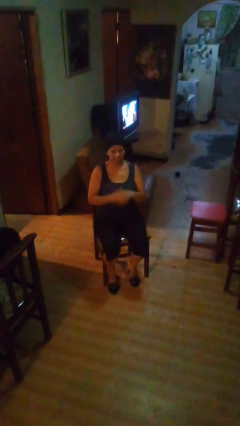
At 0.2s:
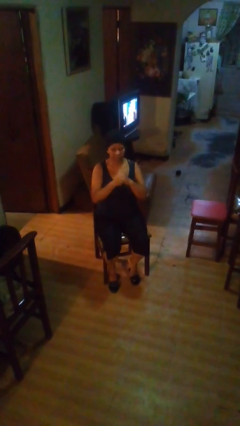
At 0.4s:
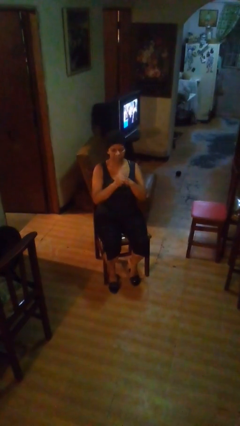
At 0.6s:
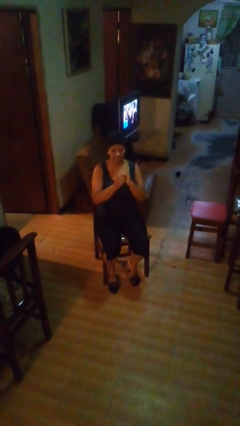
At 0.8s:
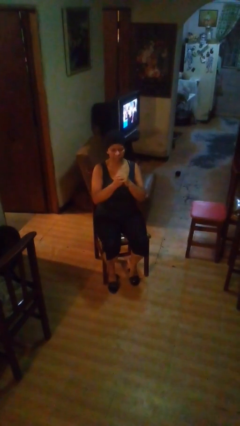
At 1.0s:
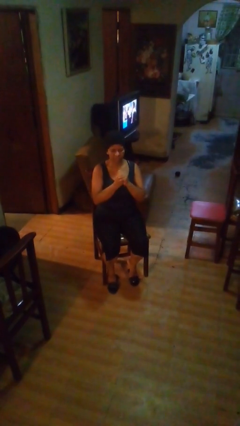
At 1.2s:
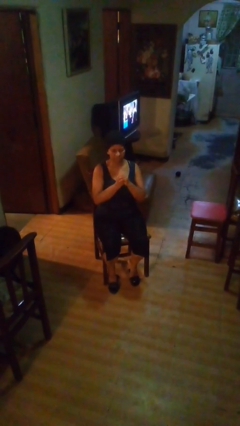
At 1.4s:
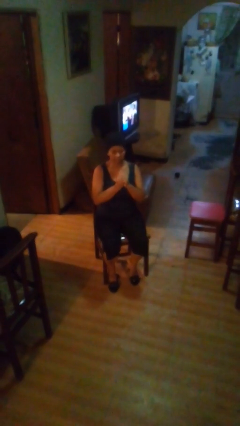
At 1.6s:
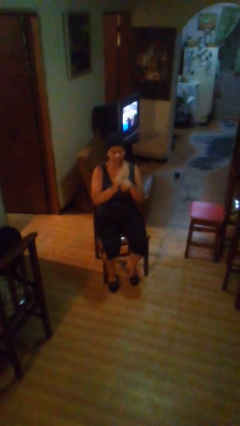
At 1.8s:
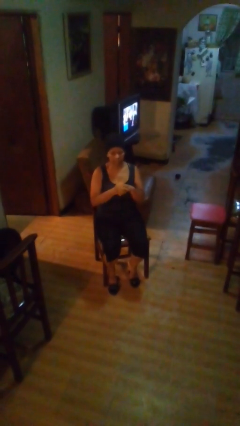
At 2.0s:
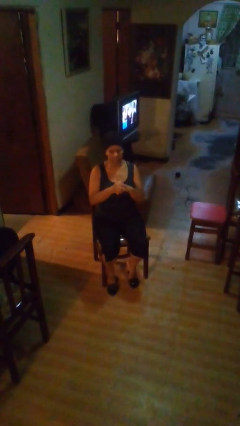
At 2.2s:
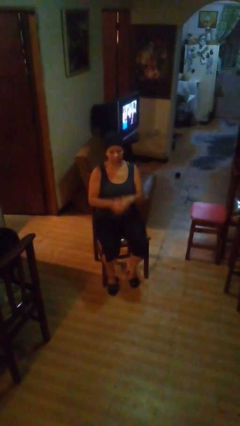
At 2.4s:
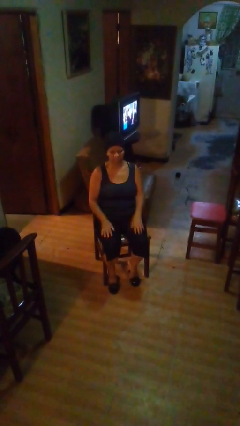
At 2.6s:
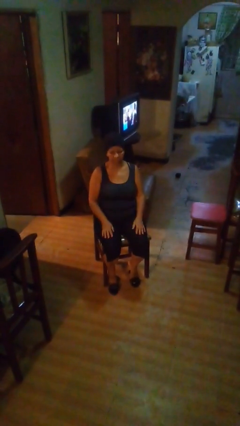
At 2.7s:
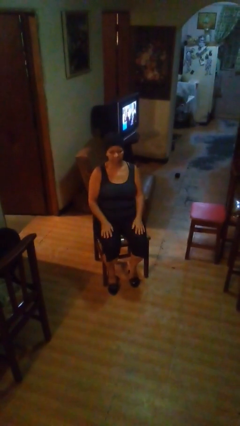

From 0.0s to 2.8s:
person cracks knuckles

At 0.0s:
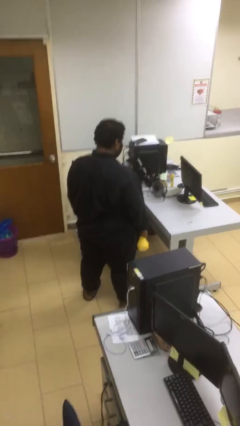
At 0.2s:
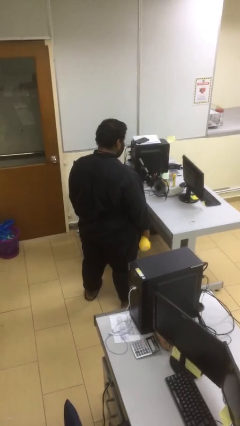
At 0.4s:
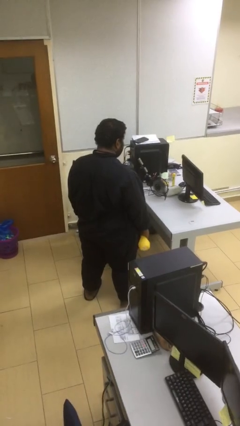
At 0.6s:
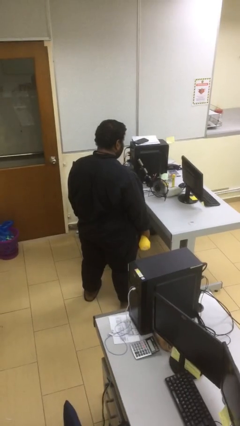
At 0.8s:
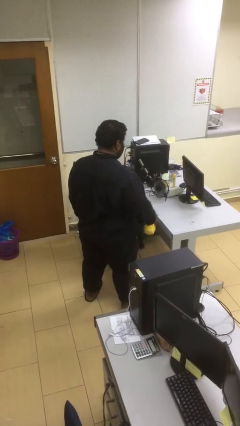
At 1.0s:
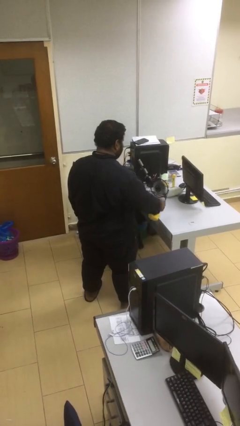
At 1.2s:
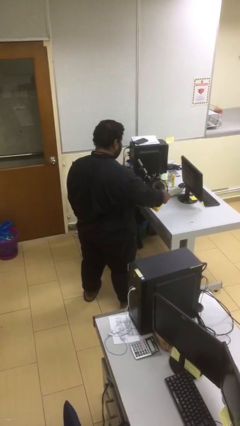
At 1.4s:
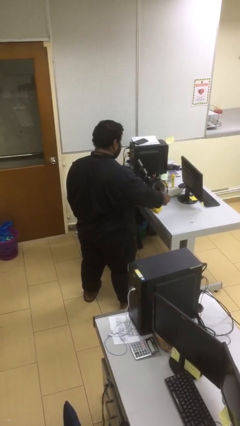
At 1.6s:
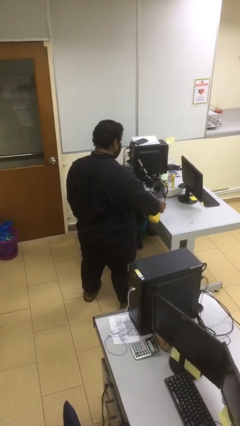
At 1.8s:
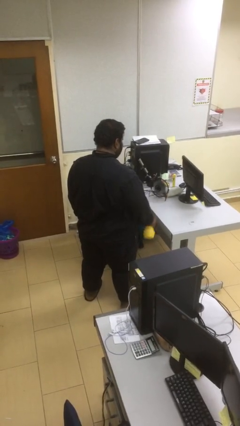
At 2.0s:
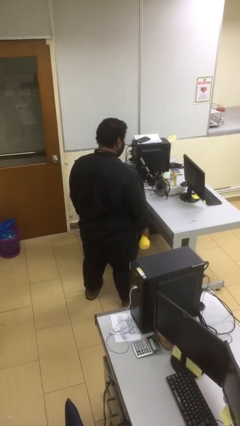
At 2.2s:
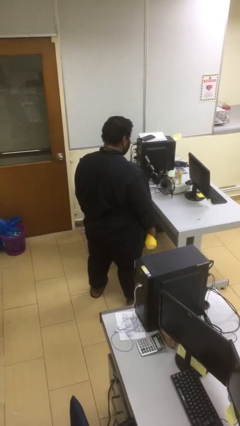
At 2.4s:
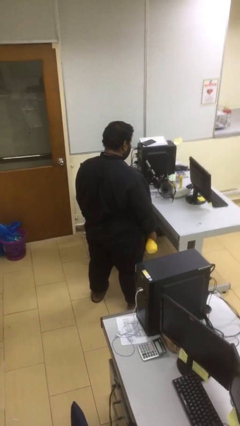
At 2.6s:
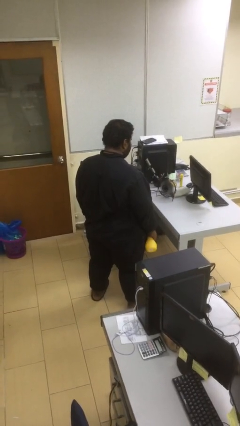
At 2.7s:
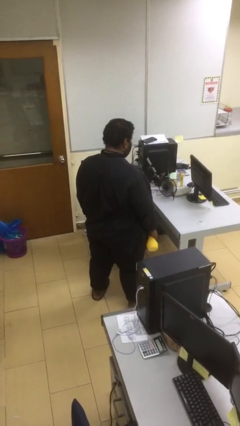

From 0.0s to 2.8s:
person sprays from bottle

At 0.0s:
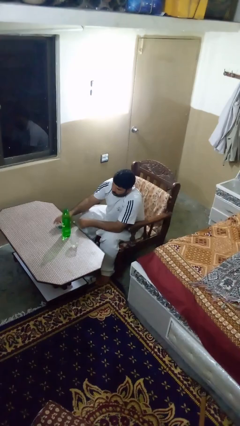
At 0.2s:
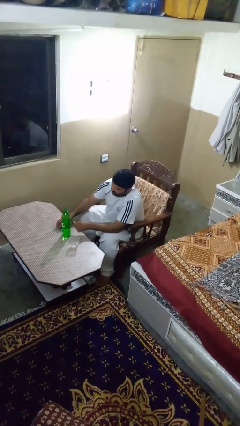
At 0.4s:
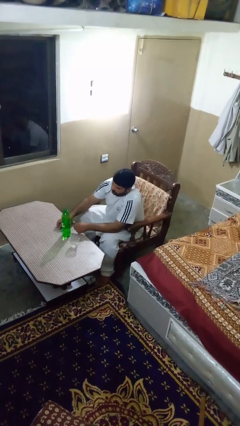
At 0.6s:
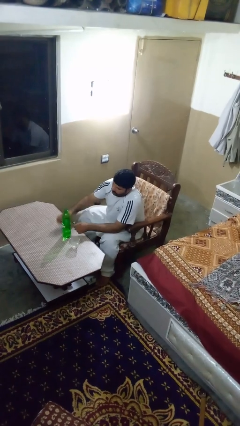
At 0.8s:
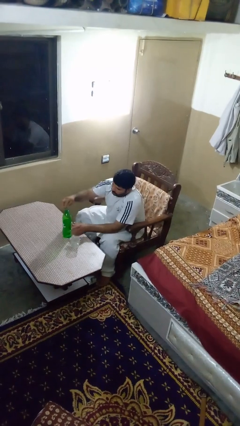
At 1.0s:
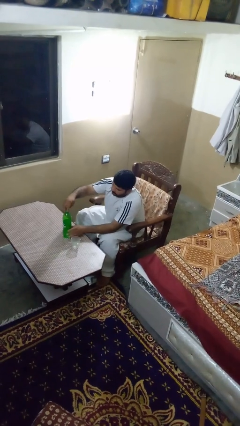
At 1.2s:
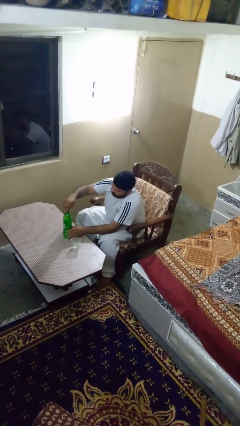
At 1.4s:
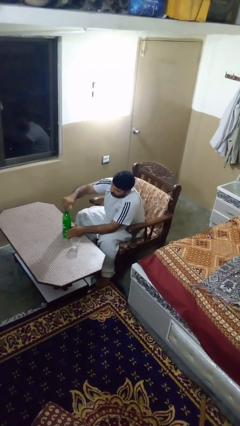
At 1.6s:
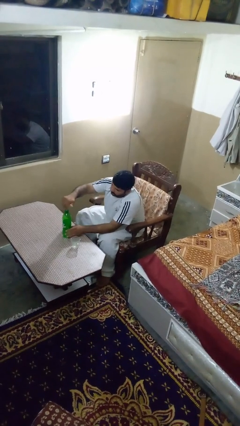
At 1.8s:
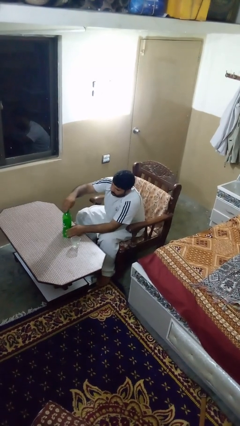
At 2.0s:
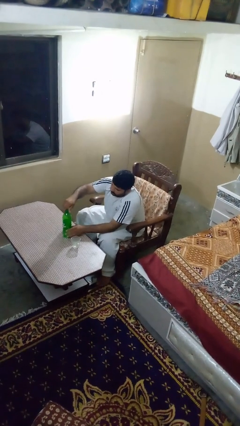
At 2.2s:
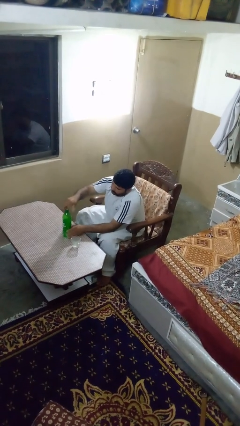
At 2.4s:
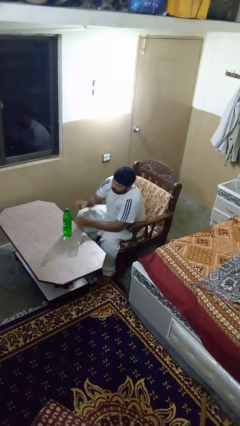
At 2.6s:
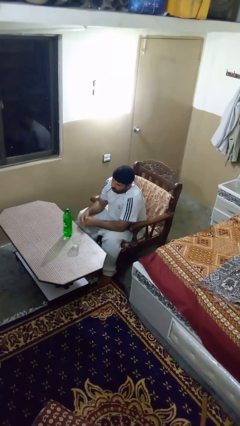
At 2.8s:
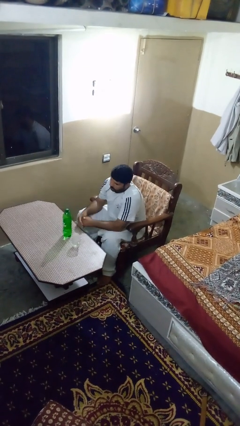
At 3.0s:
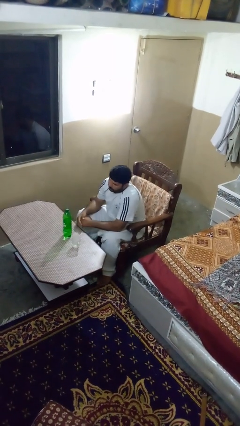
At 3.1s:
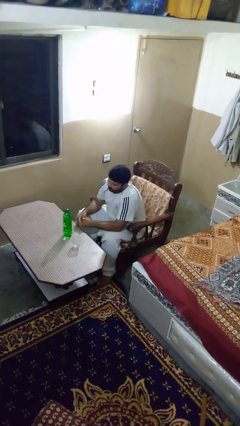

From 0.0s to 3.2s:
person screws lid to bottle

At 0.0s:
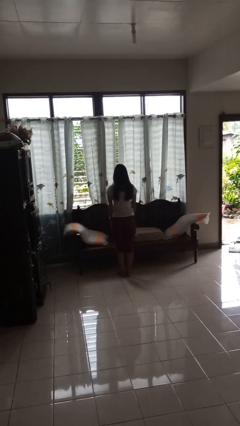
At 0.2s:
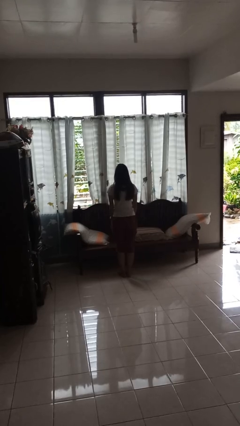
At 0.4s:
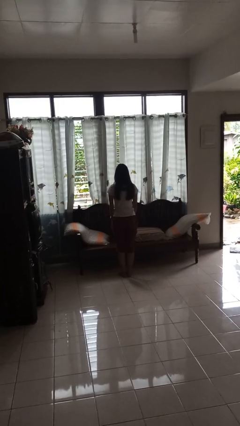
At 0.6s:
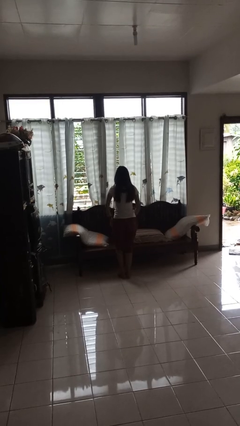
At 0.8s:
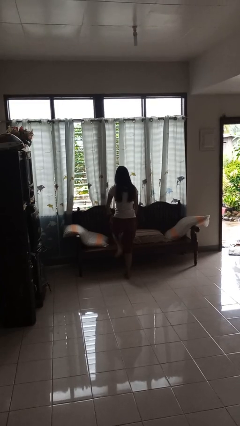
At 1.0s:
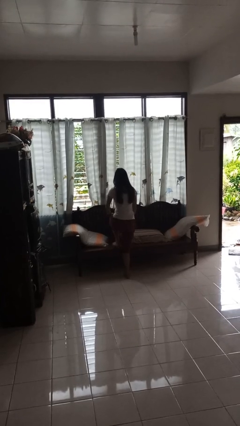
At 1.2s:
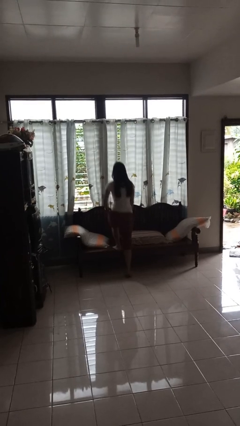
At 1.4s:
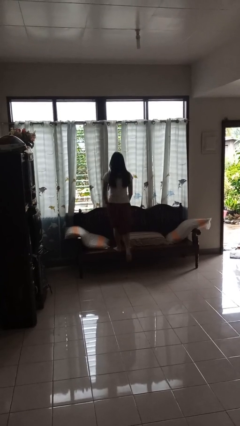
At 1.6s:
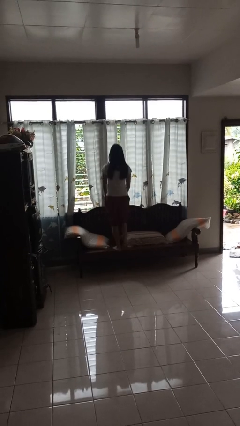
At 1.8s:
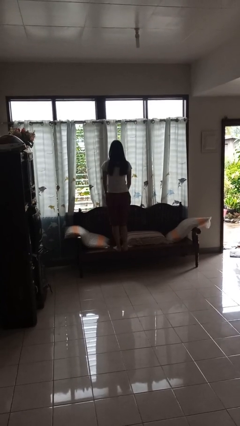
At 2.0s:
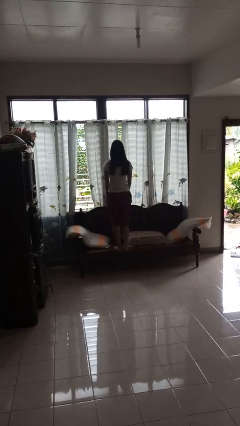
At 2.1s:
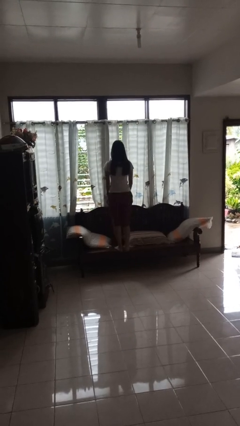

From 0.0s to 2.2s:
person climbs on couch

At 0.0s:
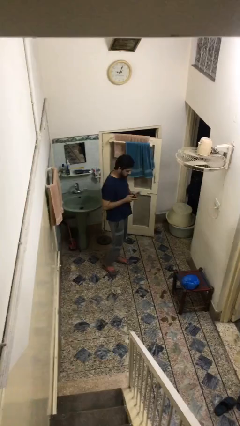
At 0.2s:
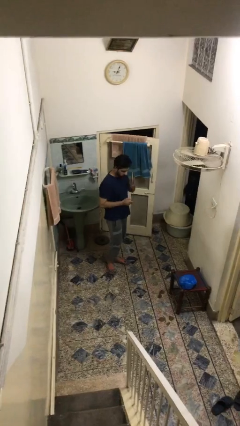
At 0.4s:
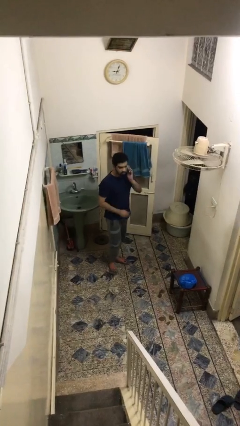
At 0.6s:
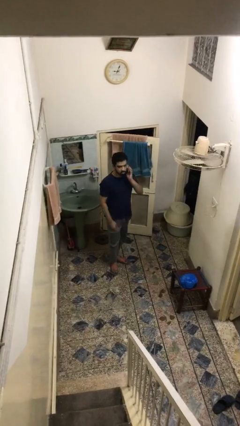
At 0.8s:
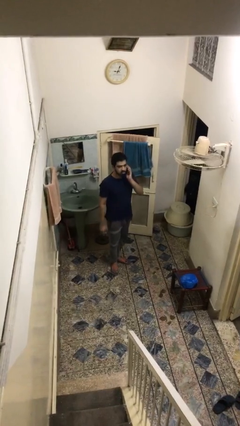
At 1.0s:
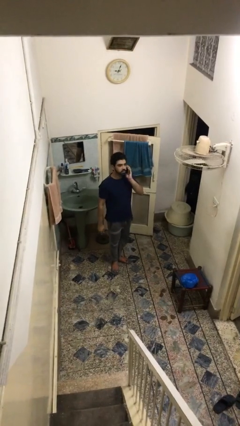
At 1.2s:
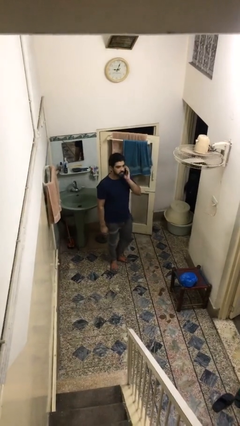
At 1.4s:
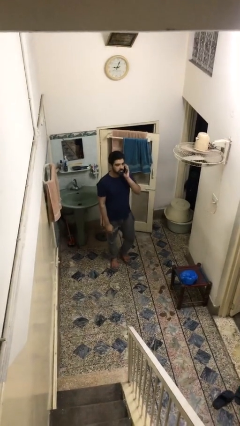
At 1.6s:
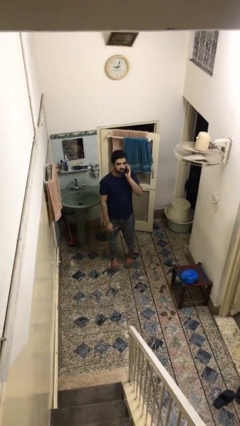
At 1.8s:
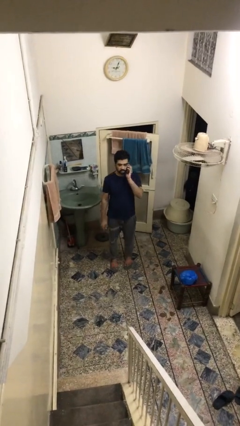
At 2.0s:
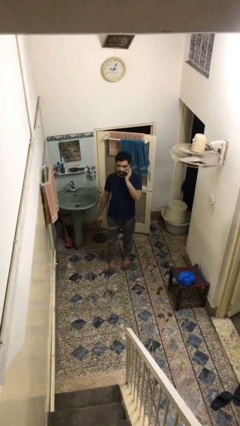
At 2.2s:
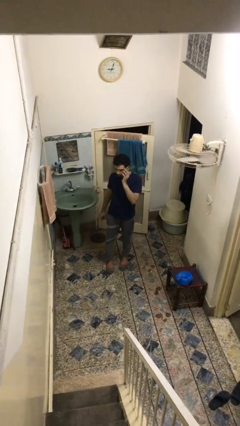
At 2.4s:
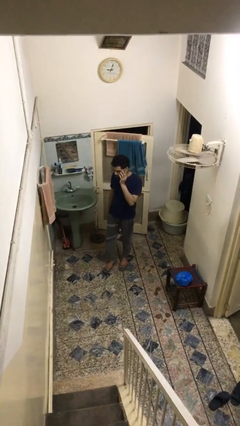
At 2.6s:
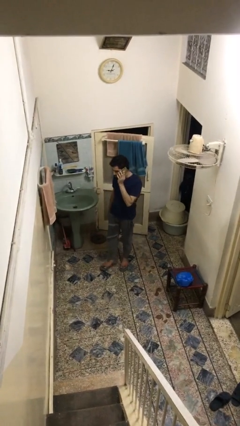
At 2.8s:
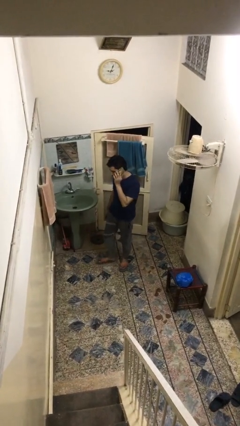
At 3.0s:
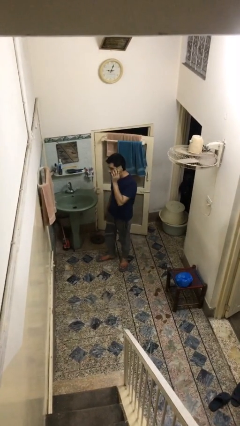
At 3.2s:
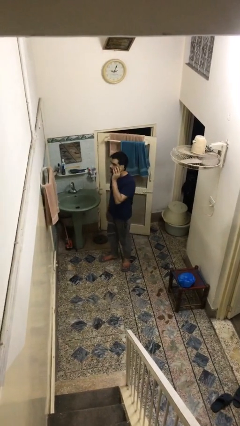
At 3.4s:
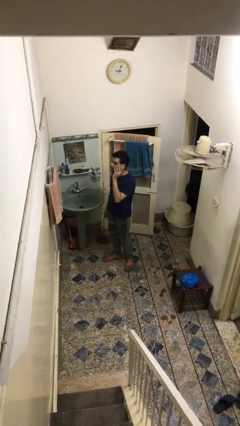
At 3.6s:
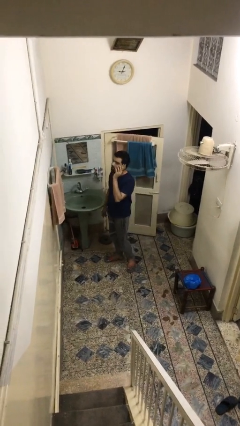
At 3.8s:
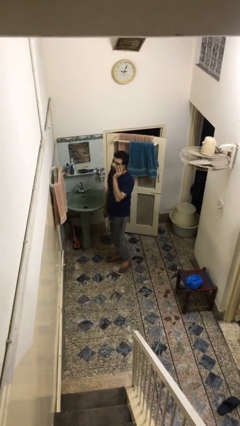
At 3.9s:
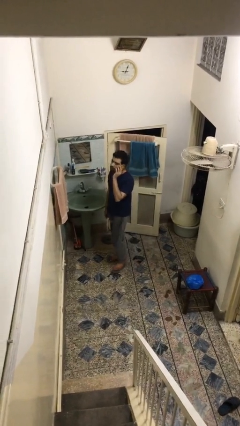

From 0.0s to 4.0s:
person talks on phone

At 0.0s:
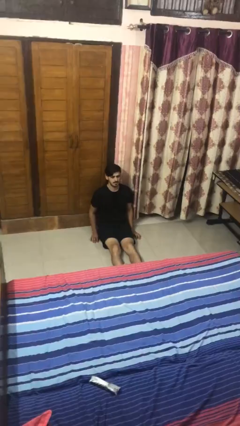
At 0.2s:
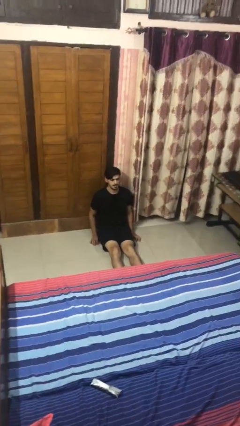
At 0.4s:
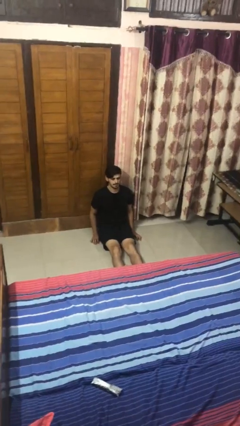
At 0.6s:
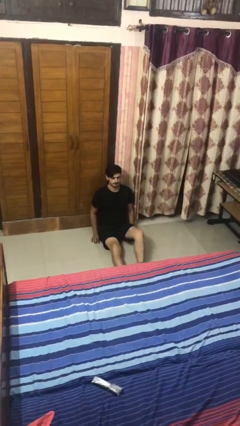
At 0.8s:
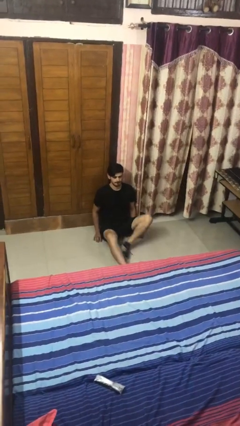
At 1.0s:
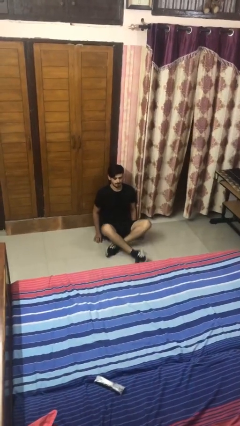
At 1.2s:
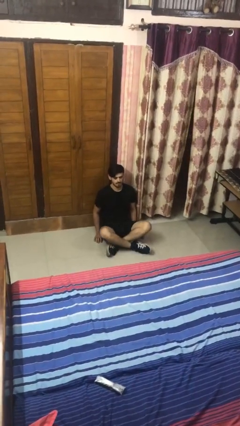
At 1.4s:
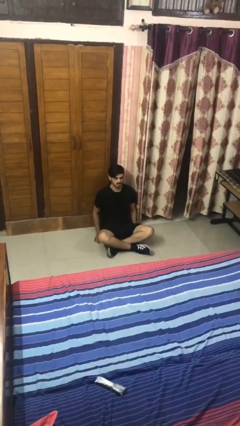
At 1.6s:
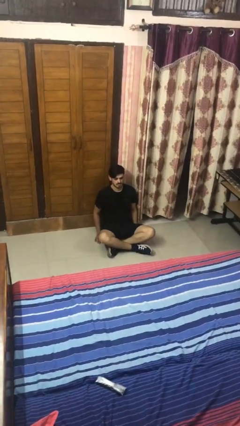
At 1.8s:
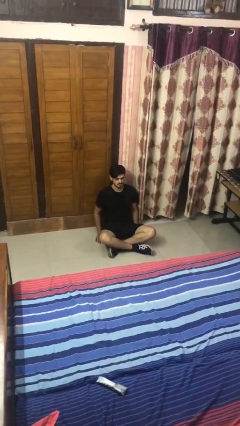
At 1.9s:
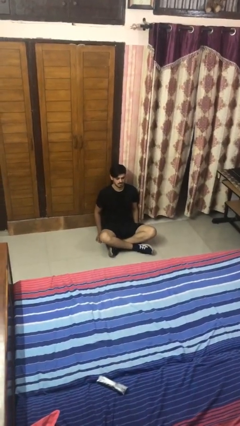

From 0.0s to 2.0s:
person crosses legs

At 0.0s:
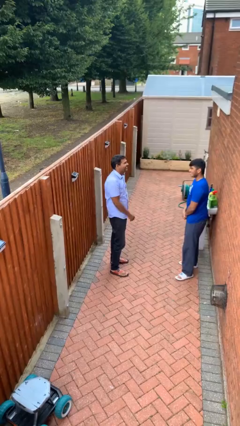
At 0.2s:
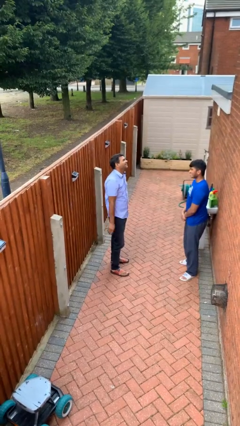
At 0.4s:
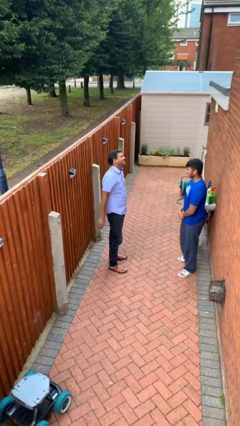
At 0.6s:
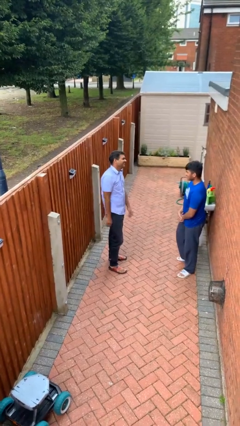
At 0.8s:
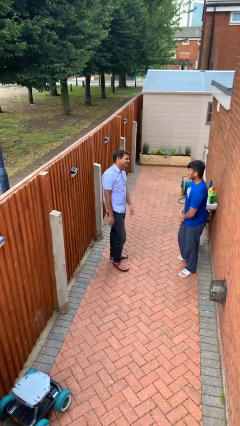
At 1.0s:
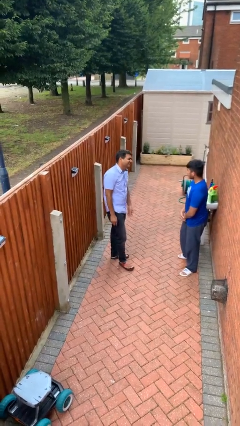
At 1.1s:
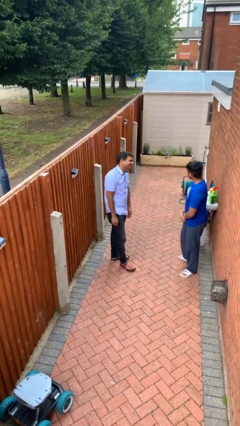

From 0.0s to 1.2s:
person laughs with person
